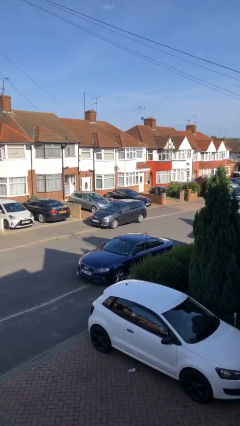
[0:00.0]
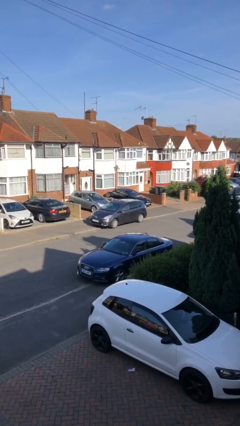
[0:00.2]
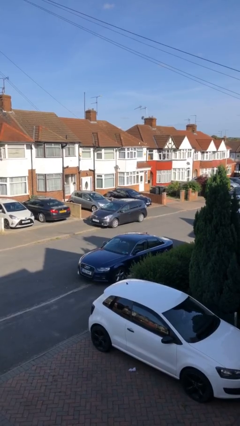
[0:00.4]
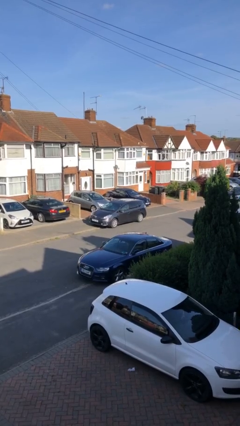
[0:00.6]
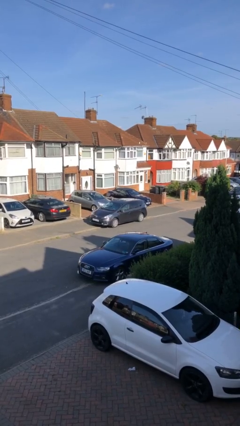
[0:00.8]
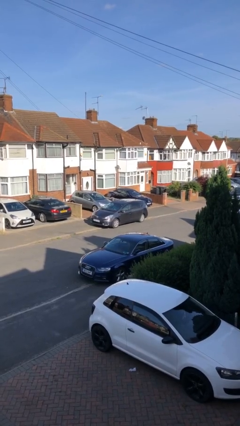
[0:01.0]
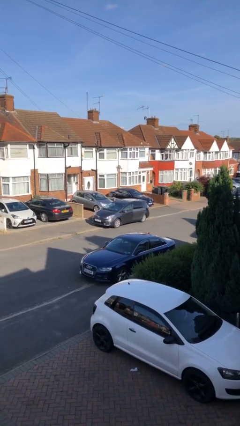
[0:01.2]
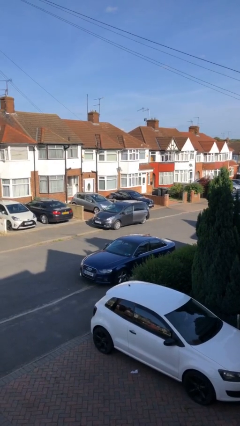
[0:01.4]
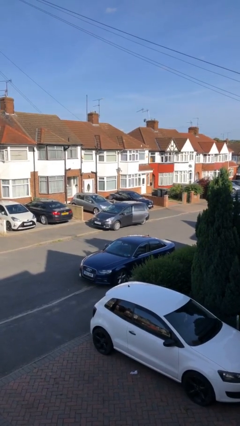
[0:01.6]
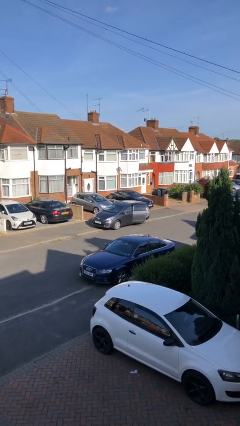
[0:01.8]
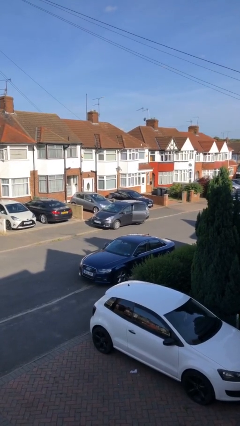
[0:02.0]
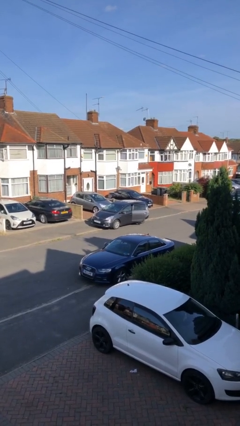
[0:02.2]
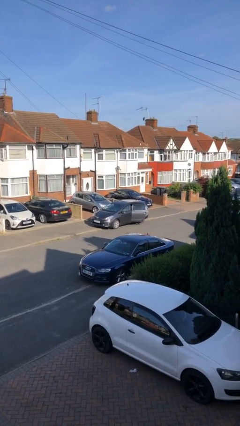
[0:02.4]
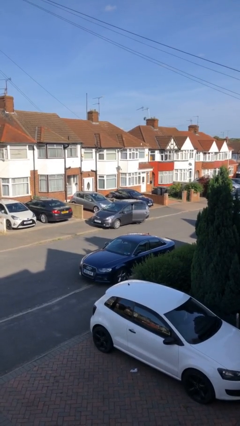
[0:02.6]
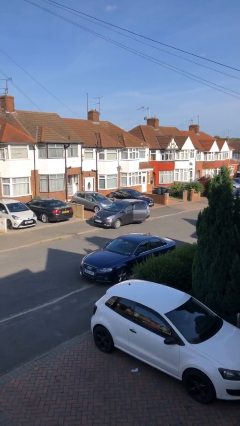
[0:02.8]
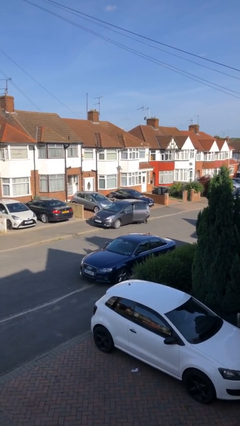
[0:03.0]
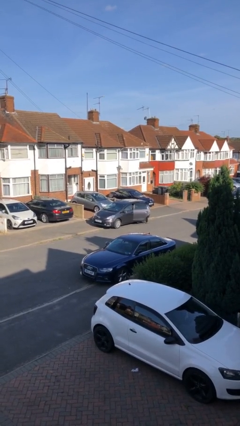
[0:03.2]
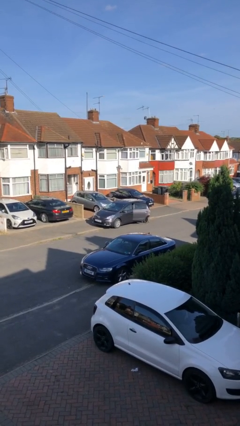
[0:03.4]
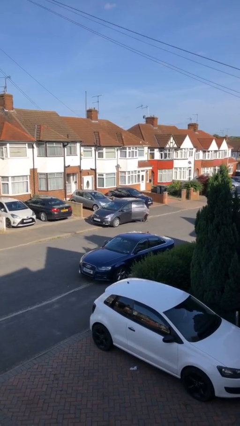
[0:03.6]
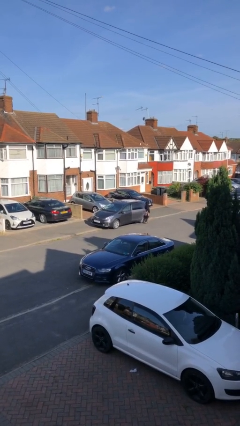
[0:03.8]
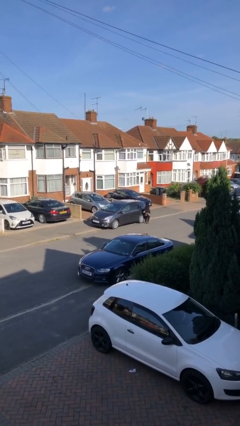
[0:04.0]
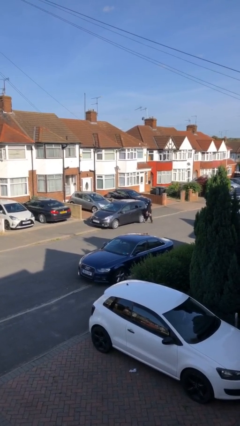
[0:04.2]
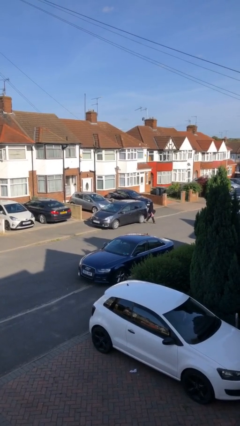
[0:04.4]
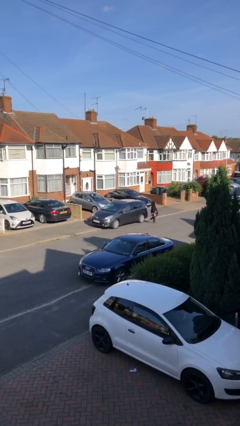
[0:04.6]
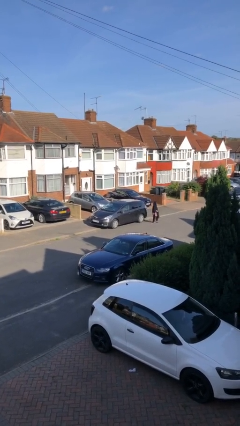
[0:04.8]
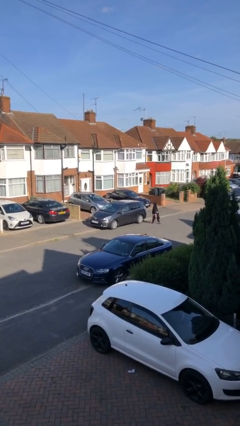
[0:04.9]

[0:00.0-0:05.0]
car drops off person

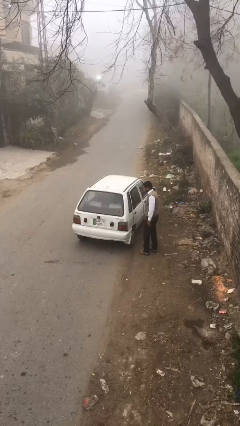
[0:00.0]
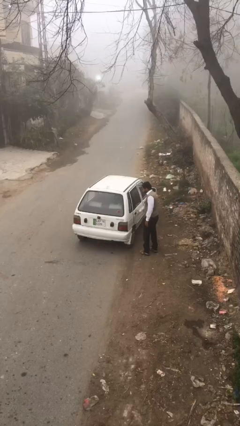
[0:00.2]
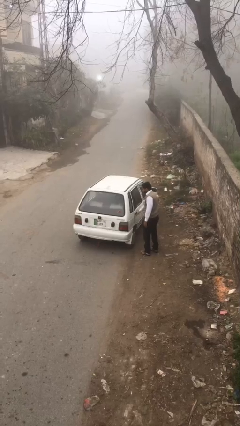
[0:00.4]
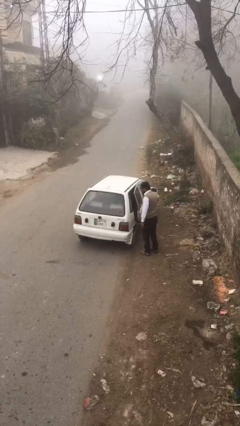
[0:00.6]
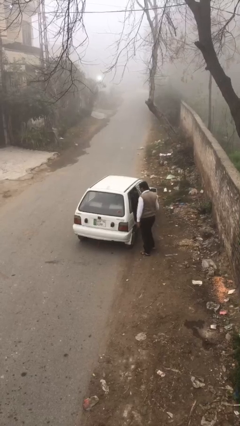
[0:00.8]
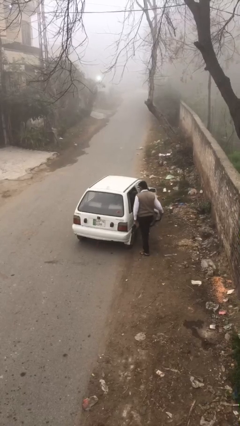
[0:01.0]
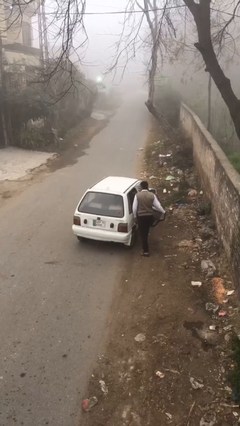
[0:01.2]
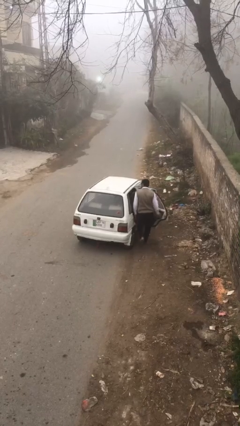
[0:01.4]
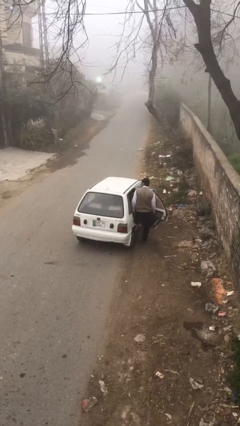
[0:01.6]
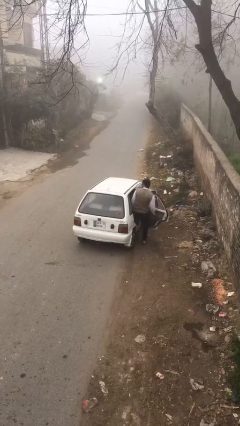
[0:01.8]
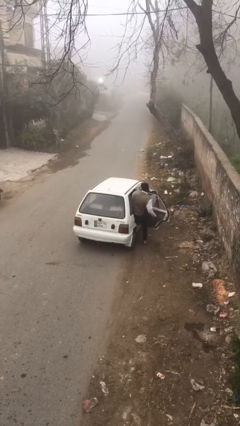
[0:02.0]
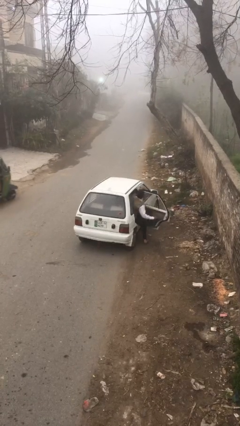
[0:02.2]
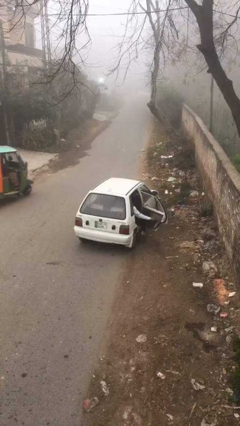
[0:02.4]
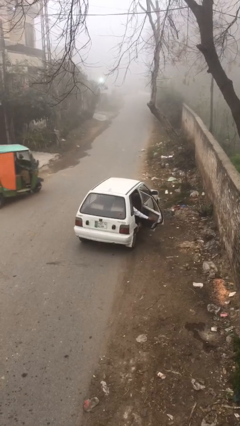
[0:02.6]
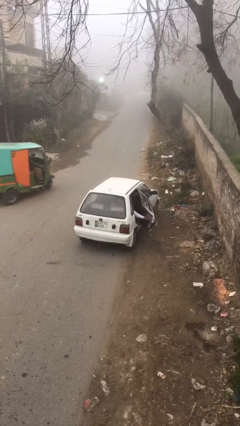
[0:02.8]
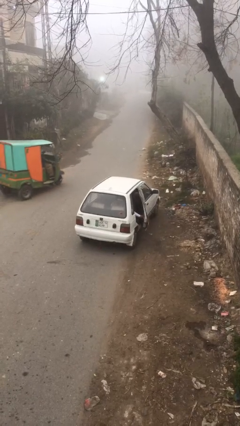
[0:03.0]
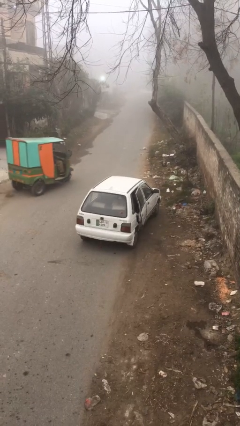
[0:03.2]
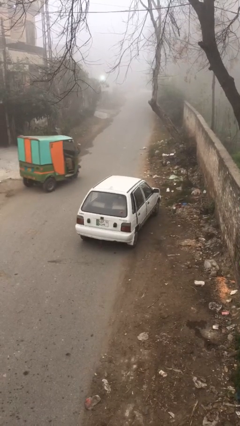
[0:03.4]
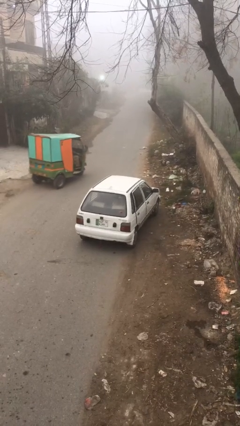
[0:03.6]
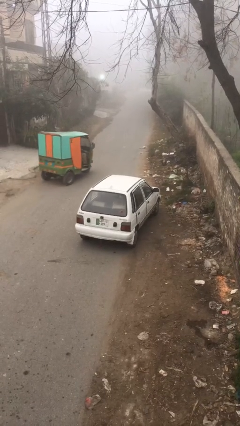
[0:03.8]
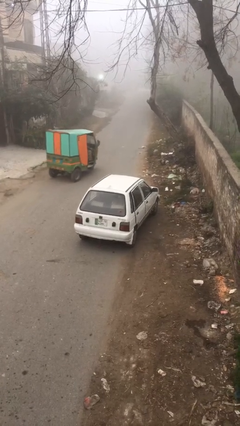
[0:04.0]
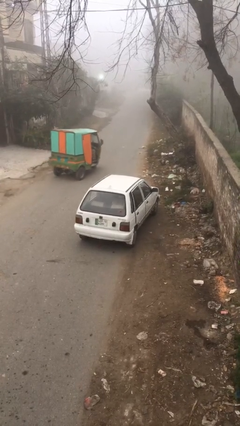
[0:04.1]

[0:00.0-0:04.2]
car picks up person

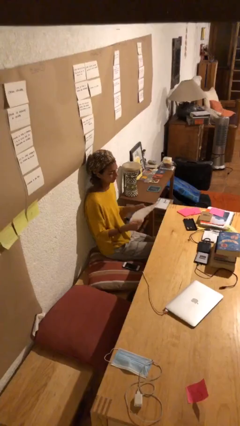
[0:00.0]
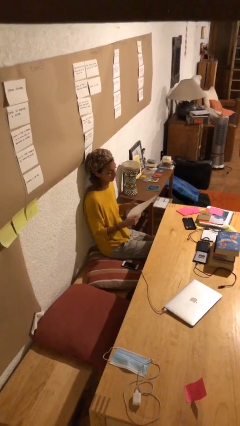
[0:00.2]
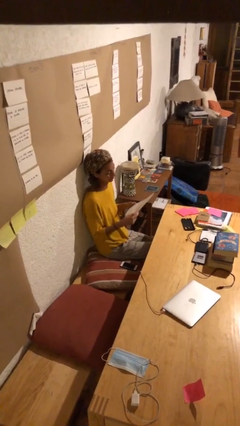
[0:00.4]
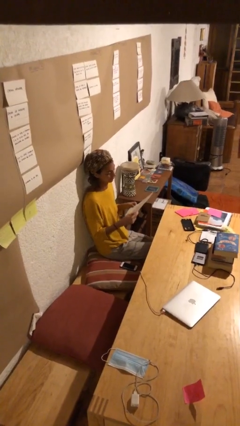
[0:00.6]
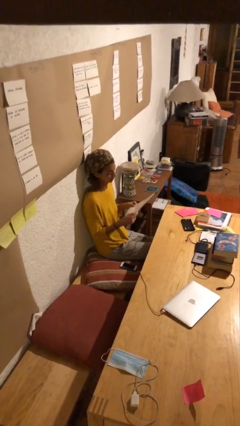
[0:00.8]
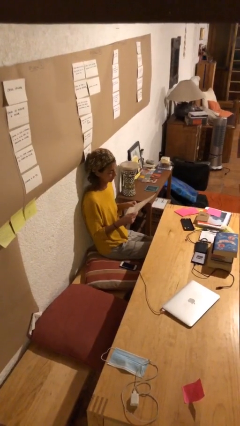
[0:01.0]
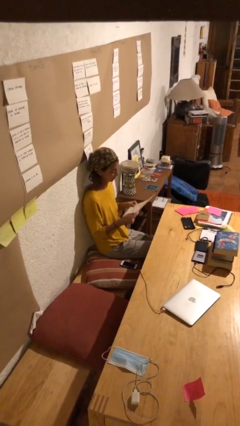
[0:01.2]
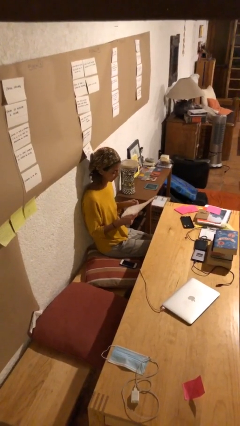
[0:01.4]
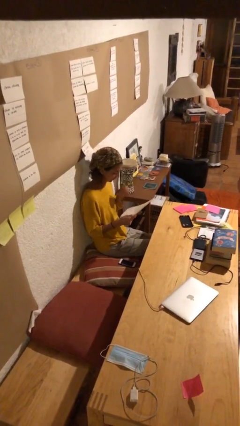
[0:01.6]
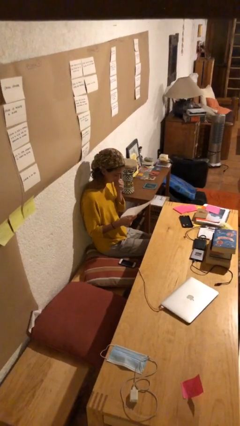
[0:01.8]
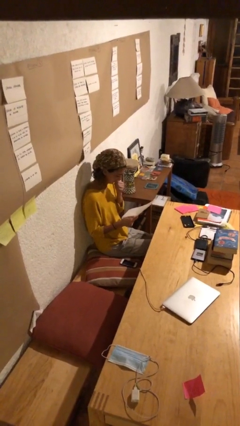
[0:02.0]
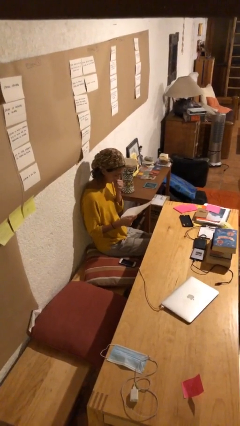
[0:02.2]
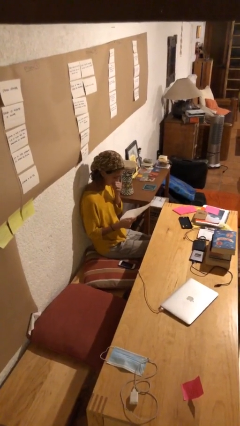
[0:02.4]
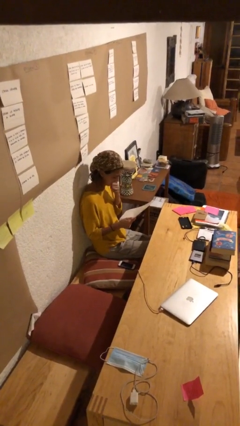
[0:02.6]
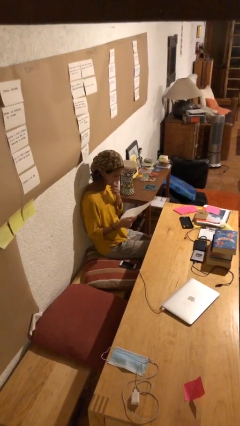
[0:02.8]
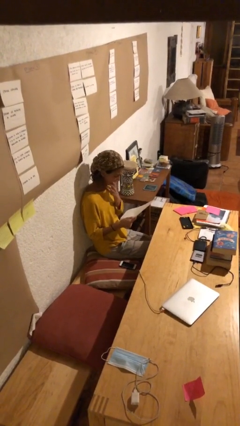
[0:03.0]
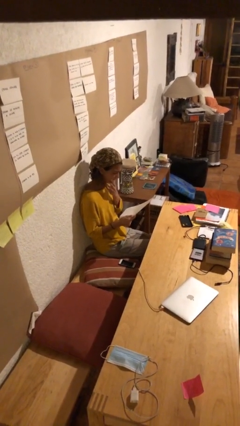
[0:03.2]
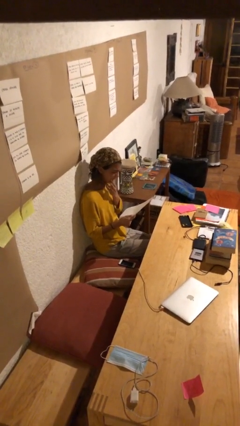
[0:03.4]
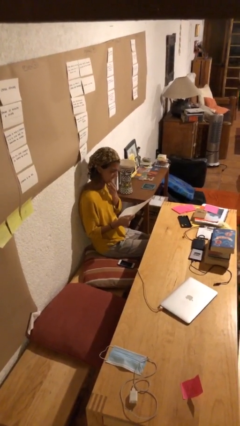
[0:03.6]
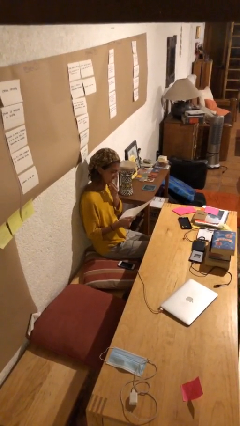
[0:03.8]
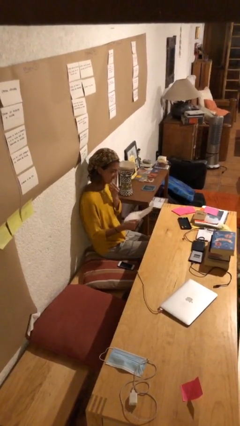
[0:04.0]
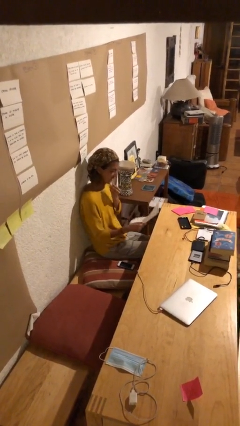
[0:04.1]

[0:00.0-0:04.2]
person reads document

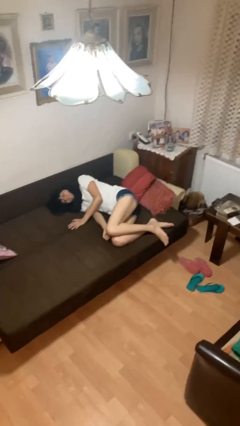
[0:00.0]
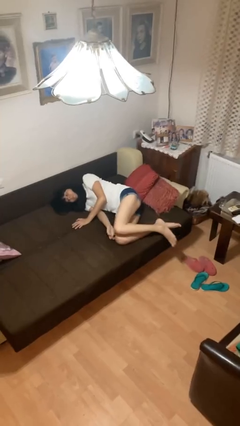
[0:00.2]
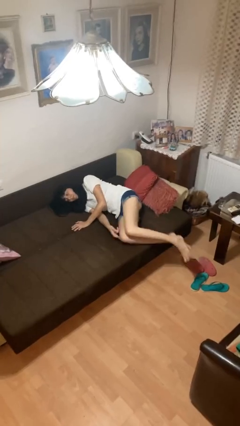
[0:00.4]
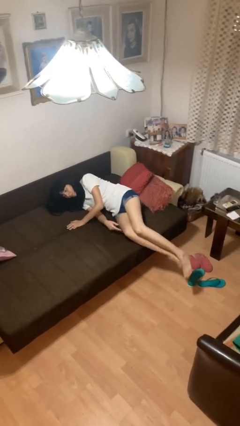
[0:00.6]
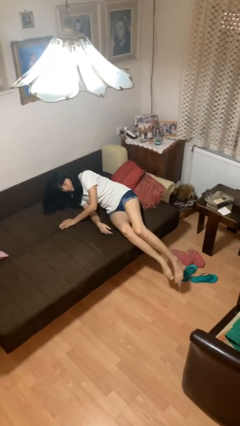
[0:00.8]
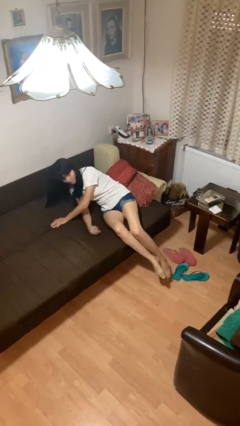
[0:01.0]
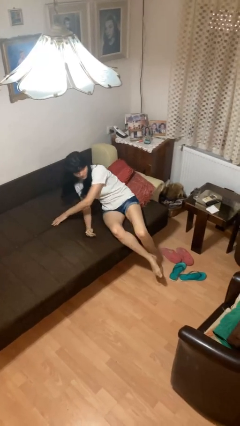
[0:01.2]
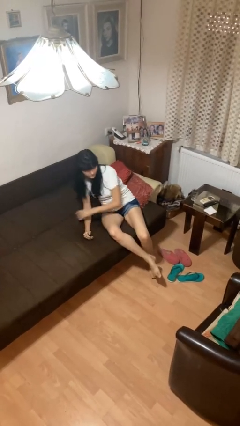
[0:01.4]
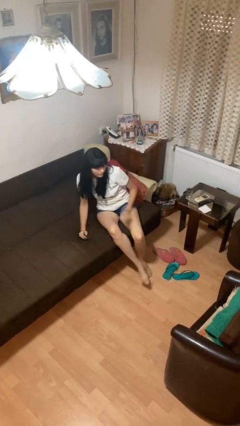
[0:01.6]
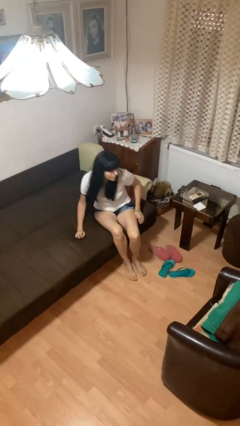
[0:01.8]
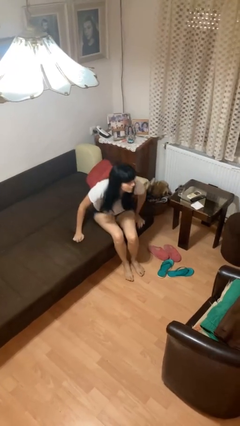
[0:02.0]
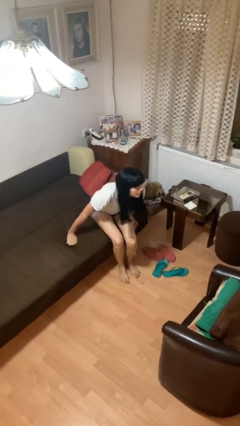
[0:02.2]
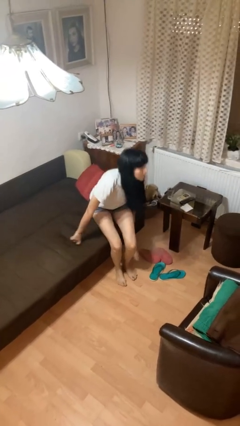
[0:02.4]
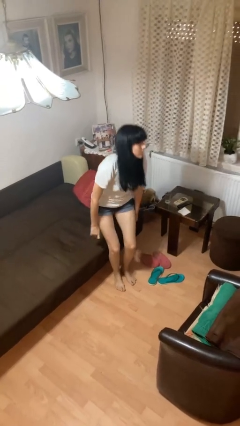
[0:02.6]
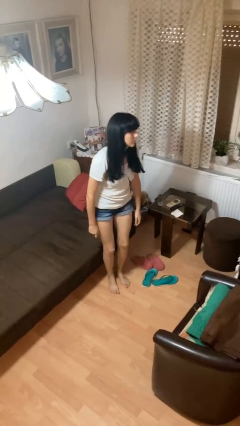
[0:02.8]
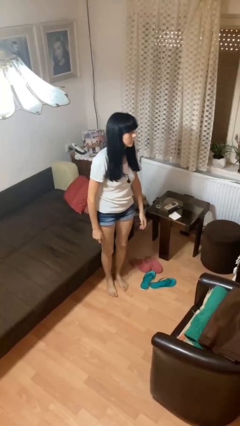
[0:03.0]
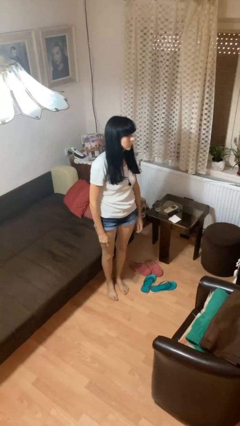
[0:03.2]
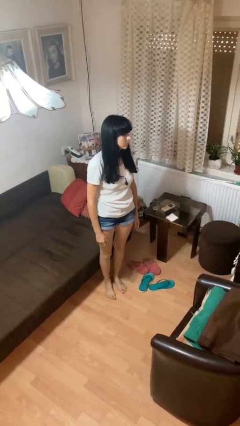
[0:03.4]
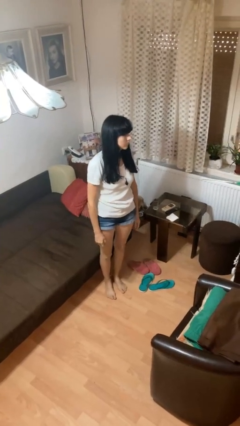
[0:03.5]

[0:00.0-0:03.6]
person stands up

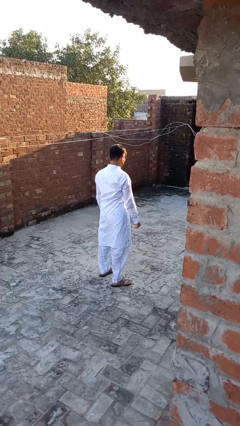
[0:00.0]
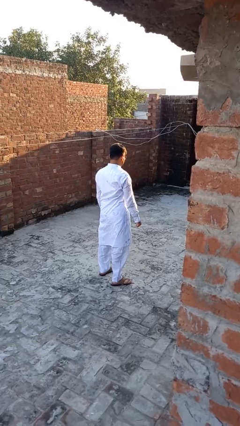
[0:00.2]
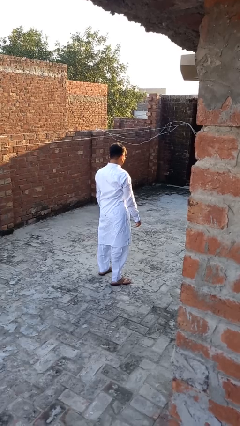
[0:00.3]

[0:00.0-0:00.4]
person gestures thumbs down
